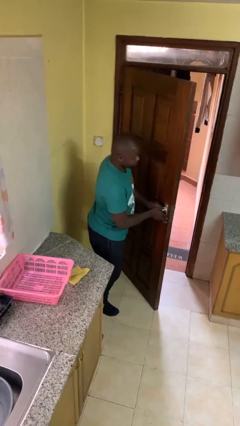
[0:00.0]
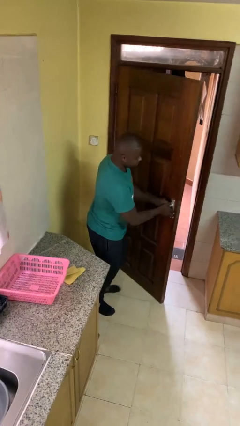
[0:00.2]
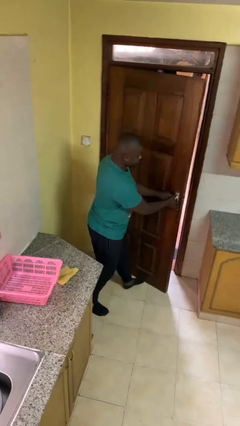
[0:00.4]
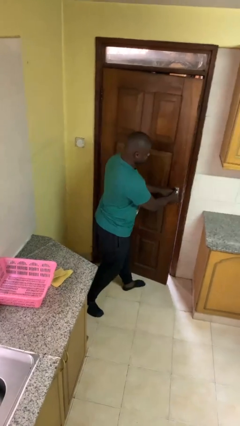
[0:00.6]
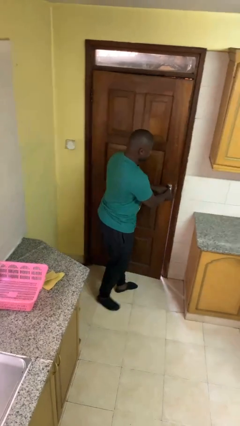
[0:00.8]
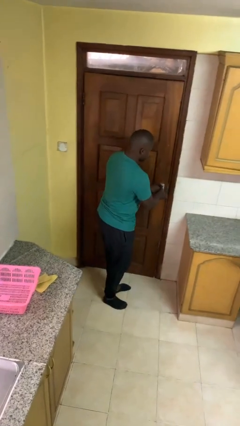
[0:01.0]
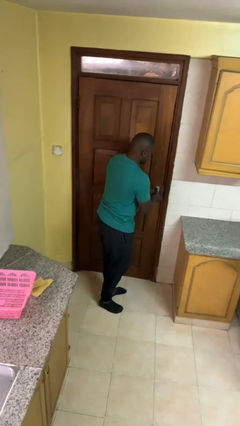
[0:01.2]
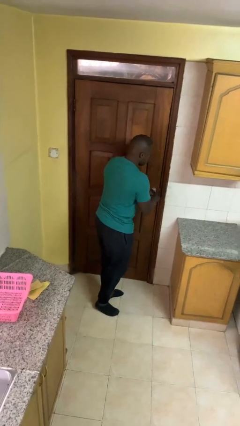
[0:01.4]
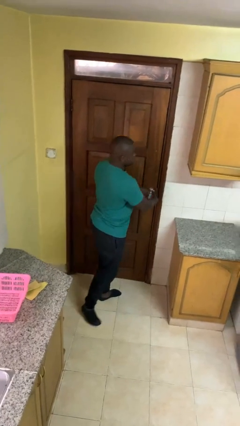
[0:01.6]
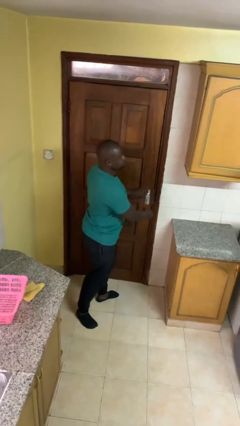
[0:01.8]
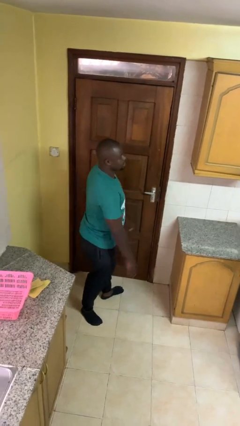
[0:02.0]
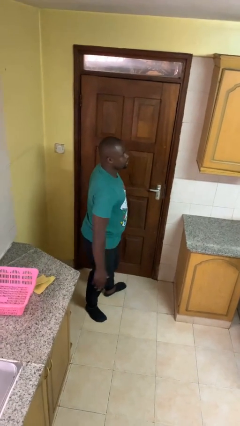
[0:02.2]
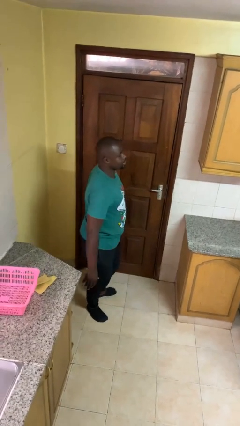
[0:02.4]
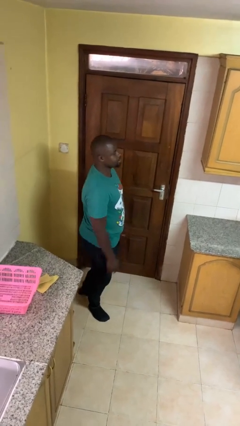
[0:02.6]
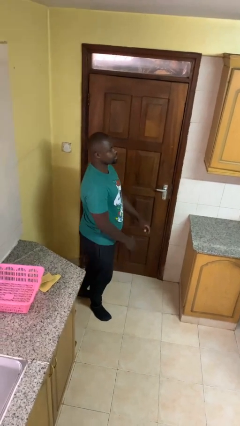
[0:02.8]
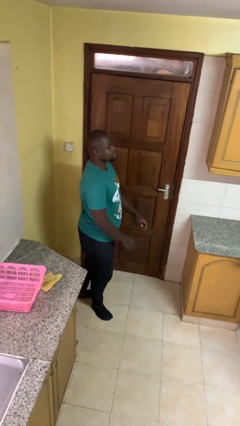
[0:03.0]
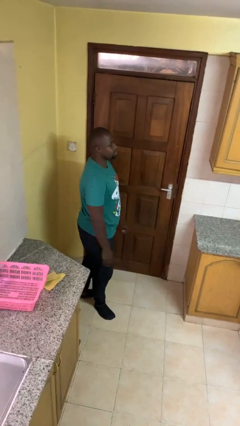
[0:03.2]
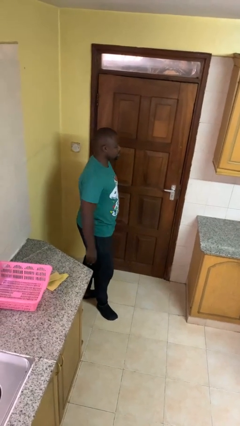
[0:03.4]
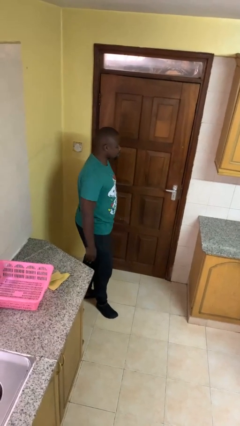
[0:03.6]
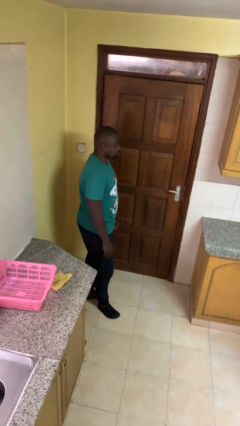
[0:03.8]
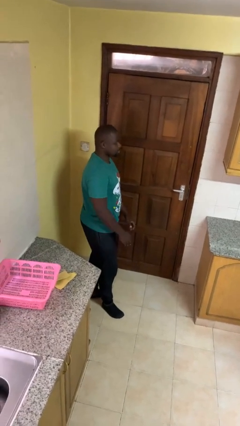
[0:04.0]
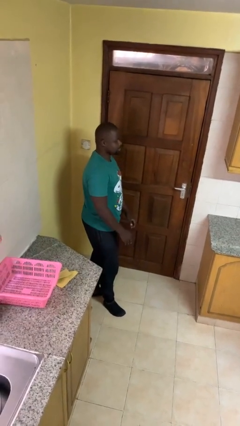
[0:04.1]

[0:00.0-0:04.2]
person closes facility door

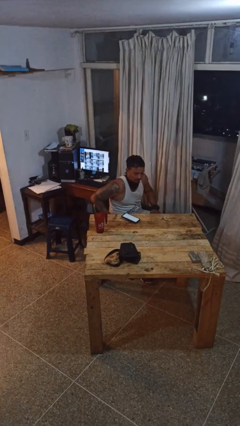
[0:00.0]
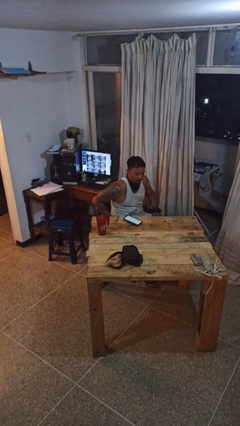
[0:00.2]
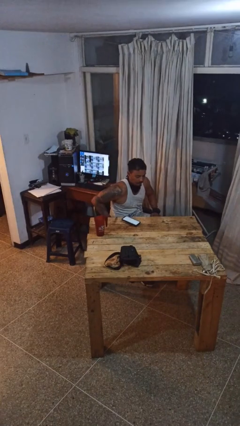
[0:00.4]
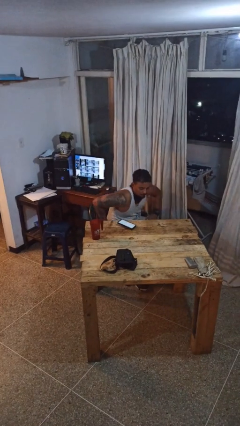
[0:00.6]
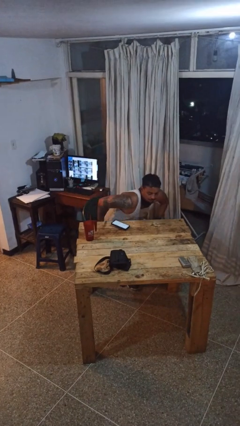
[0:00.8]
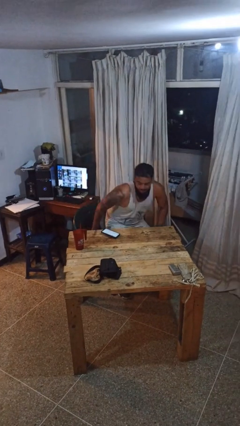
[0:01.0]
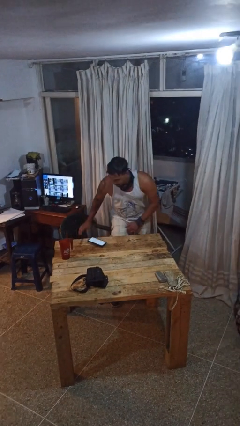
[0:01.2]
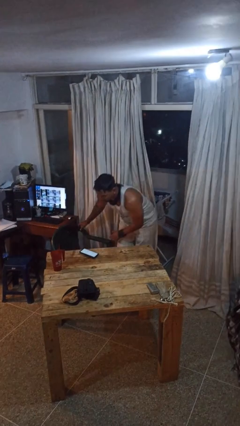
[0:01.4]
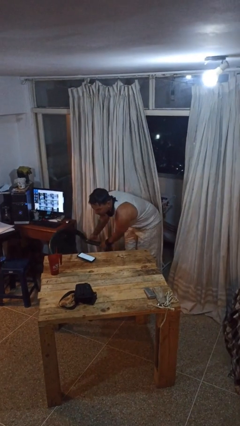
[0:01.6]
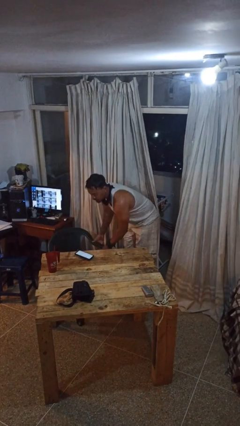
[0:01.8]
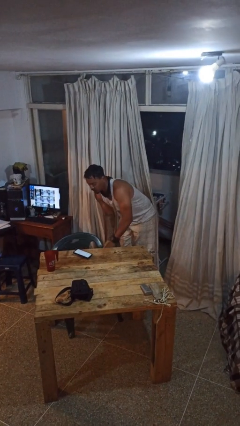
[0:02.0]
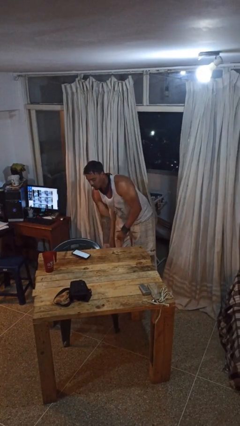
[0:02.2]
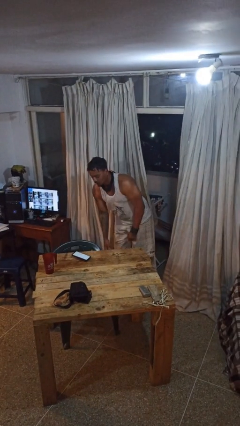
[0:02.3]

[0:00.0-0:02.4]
person stands up

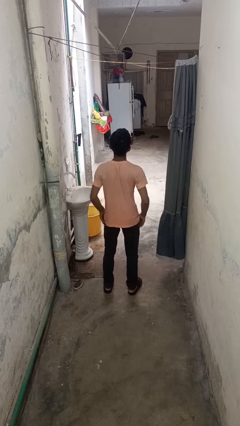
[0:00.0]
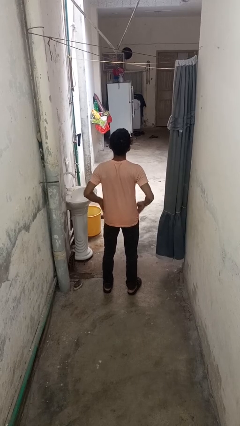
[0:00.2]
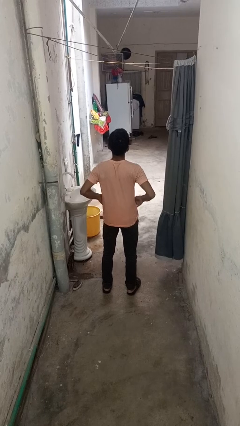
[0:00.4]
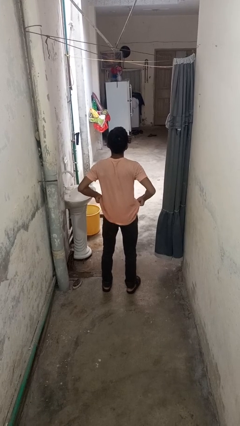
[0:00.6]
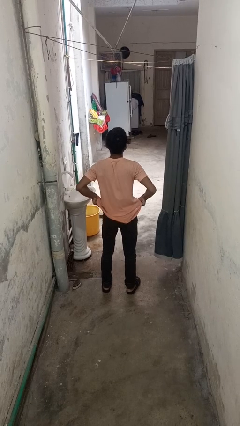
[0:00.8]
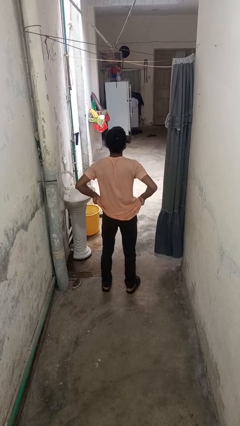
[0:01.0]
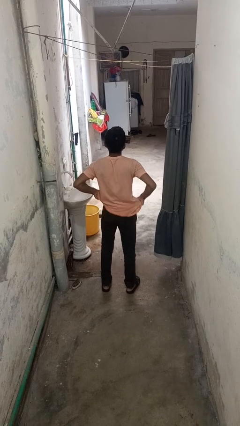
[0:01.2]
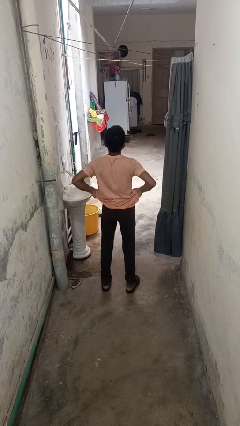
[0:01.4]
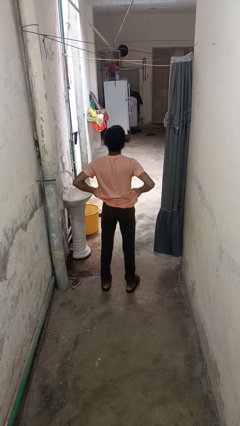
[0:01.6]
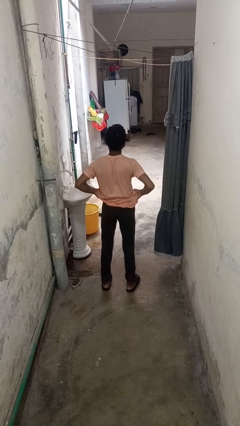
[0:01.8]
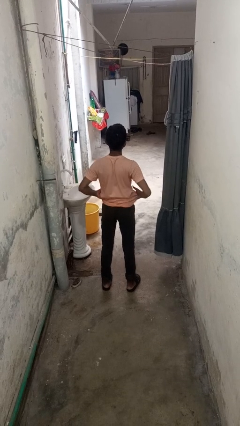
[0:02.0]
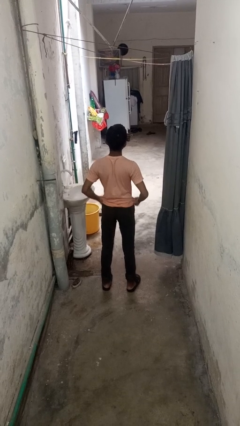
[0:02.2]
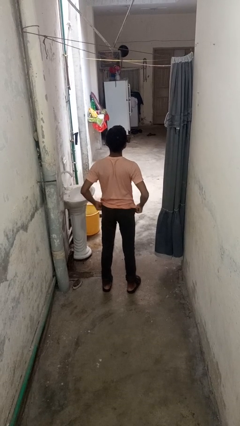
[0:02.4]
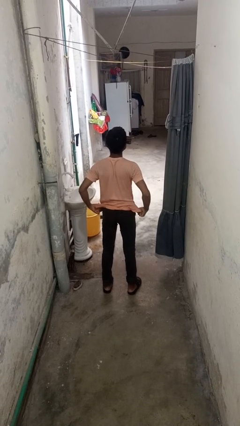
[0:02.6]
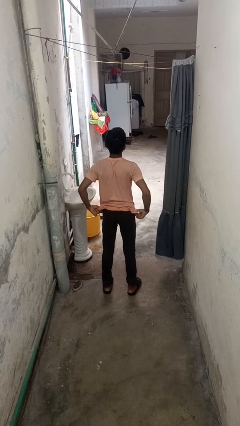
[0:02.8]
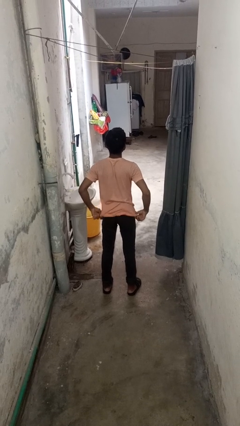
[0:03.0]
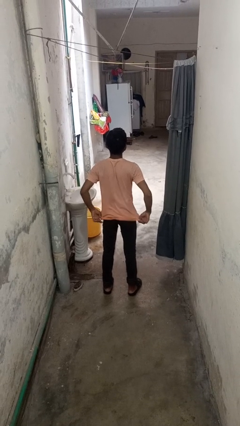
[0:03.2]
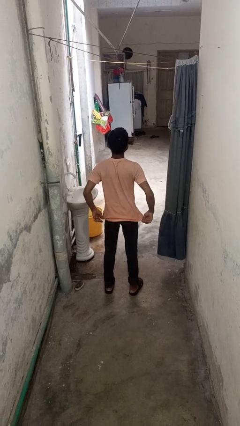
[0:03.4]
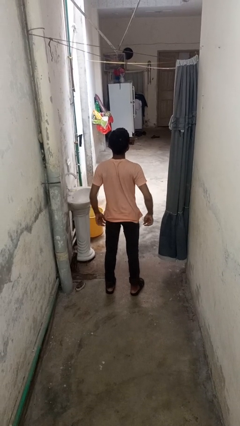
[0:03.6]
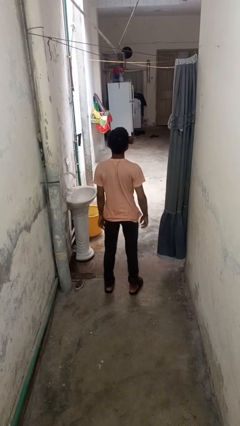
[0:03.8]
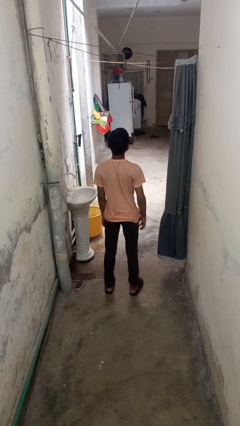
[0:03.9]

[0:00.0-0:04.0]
person hikes up pants

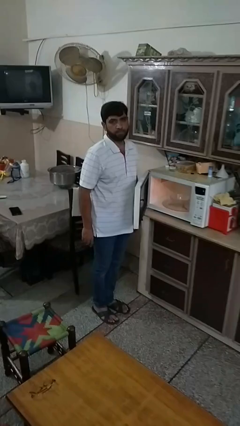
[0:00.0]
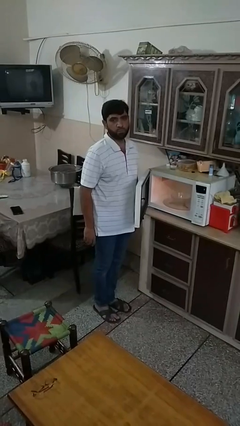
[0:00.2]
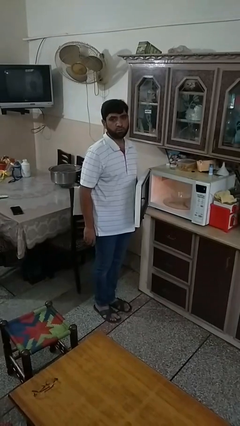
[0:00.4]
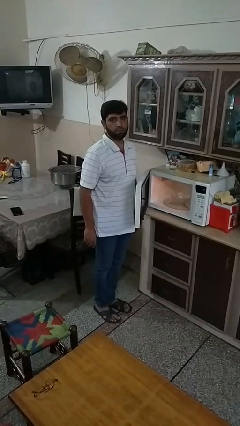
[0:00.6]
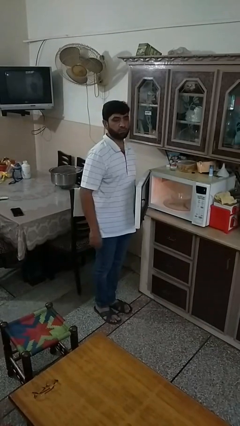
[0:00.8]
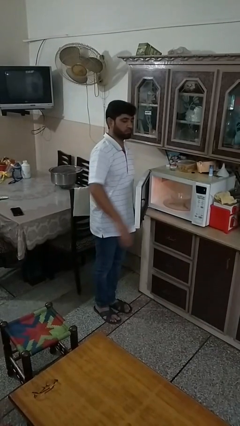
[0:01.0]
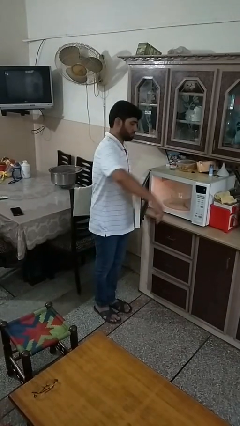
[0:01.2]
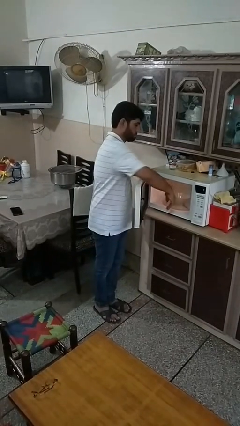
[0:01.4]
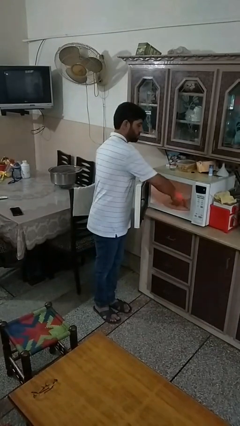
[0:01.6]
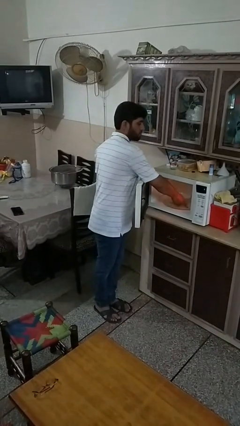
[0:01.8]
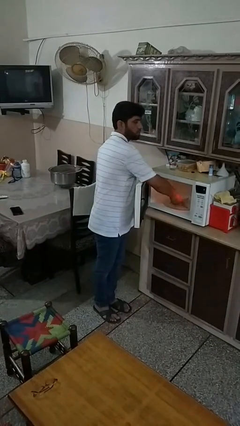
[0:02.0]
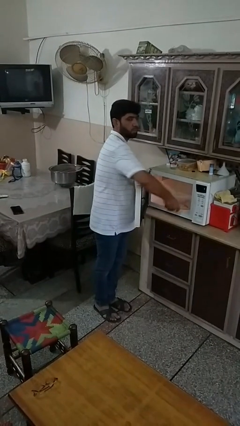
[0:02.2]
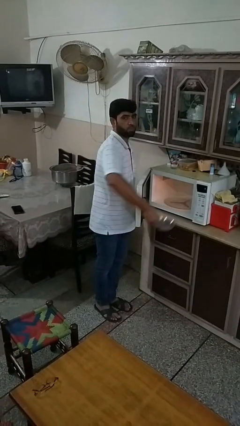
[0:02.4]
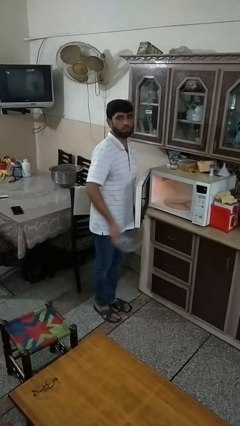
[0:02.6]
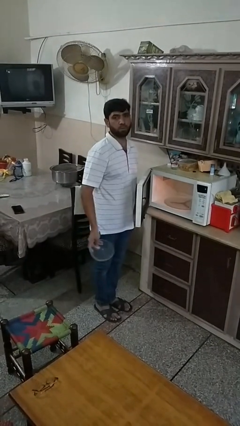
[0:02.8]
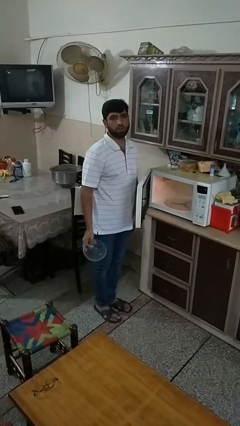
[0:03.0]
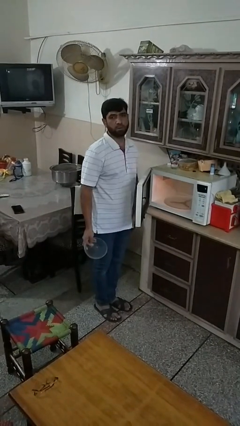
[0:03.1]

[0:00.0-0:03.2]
person takes object from microwave

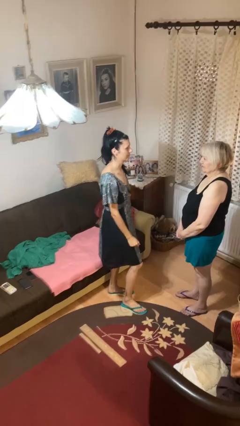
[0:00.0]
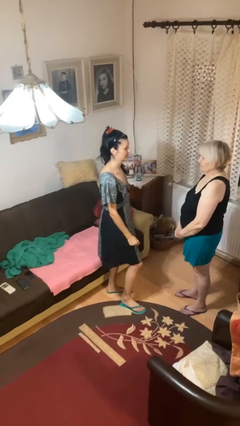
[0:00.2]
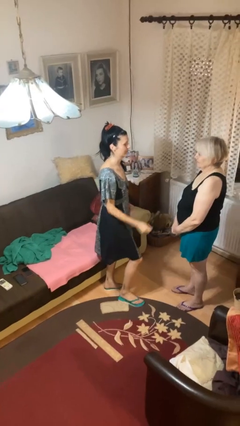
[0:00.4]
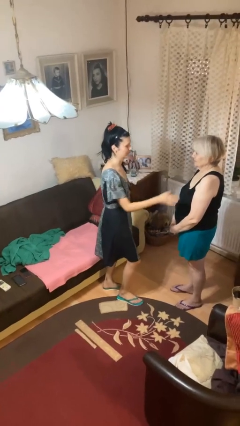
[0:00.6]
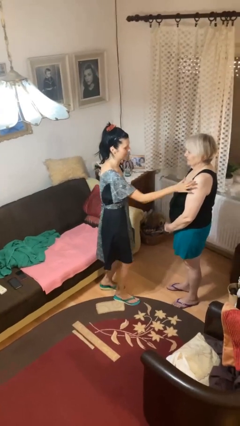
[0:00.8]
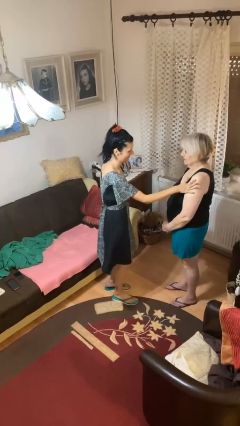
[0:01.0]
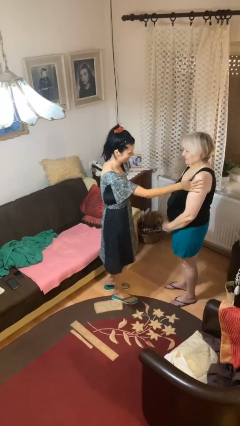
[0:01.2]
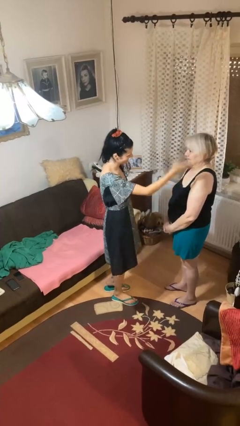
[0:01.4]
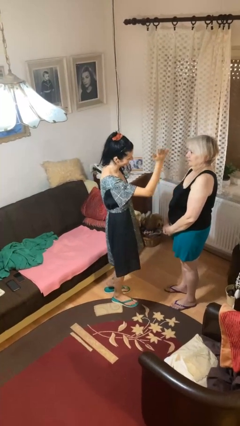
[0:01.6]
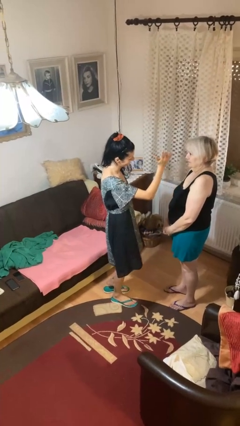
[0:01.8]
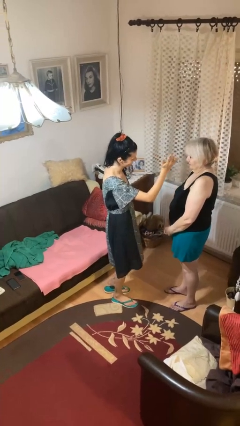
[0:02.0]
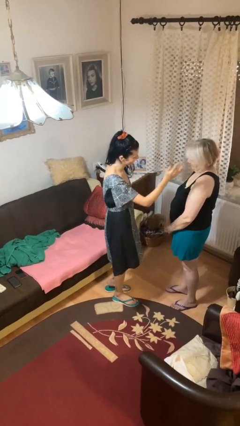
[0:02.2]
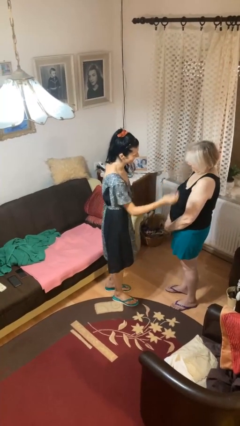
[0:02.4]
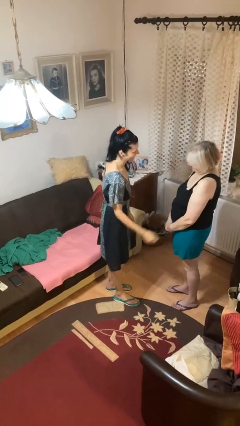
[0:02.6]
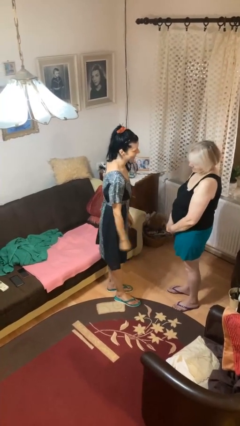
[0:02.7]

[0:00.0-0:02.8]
person shoves person

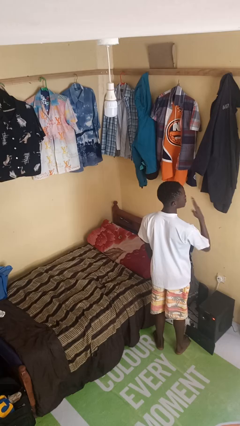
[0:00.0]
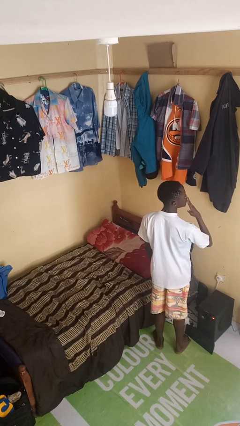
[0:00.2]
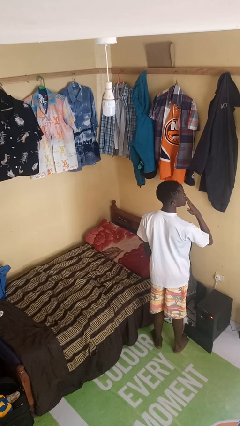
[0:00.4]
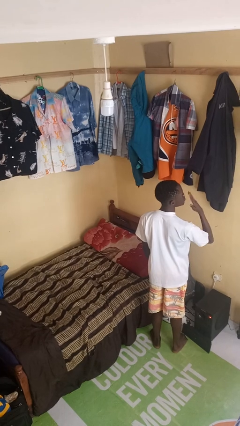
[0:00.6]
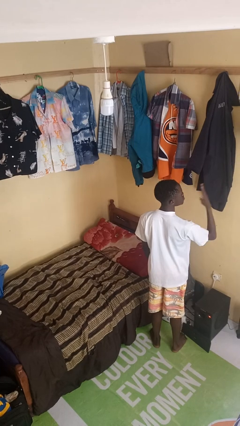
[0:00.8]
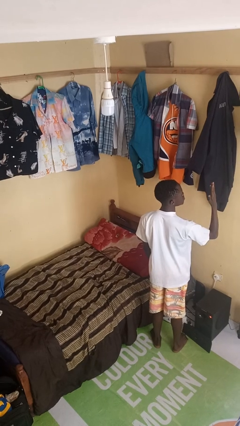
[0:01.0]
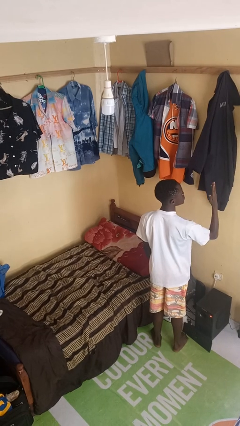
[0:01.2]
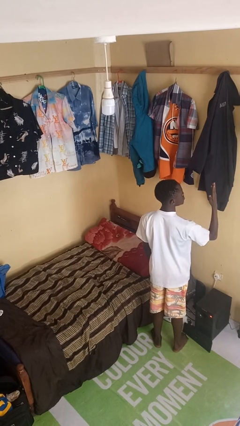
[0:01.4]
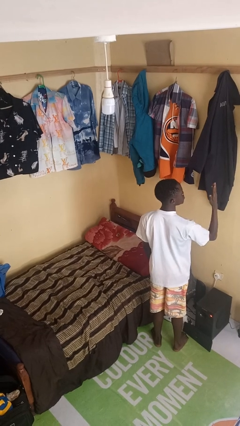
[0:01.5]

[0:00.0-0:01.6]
person gestures blow kiss
